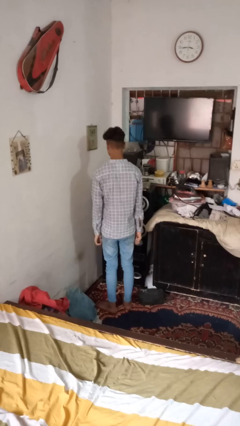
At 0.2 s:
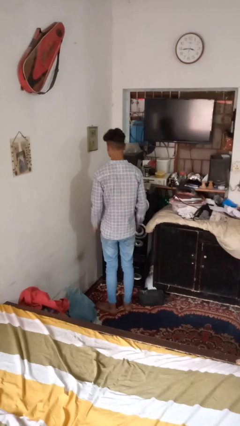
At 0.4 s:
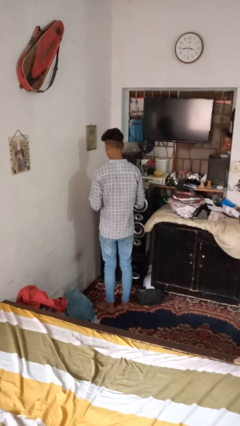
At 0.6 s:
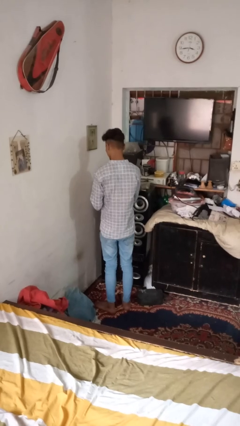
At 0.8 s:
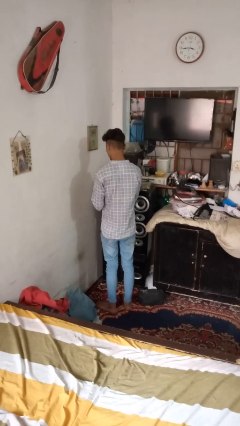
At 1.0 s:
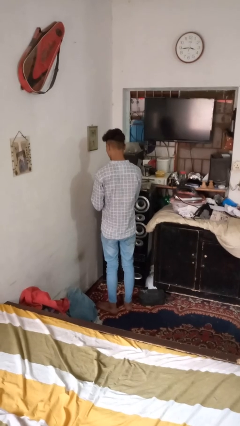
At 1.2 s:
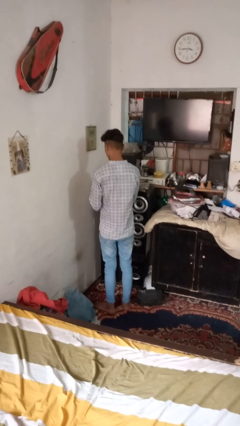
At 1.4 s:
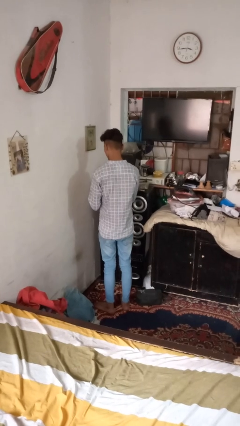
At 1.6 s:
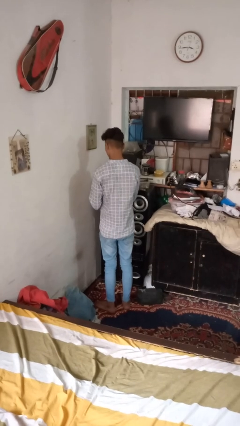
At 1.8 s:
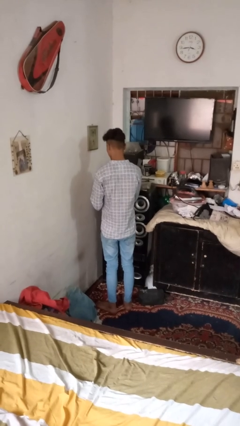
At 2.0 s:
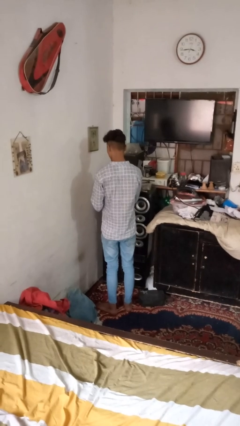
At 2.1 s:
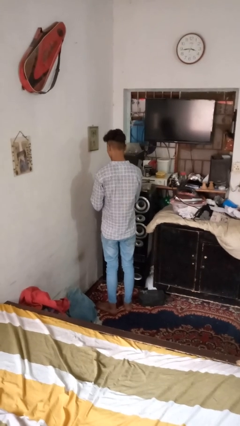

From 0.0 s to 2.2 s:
person clips fingernails

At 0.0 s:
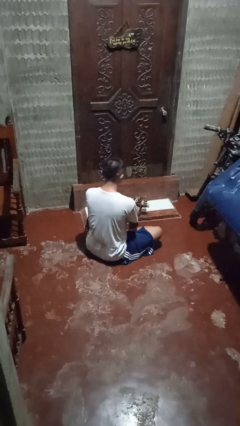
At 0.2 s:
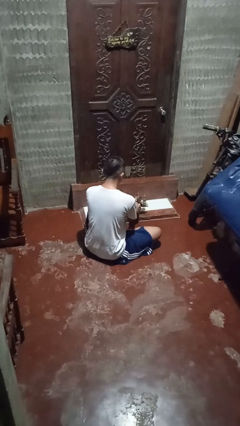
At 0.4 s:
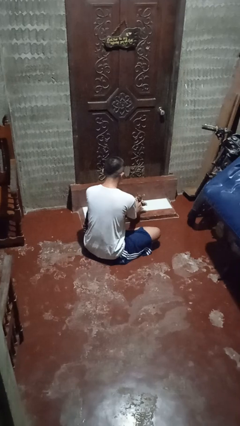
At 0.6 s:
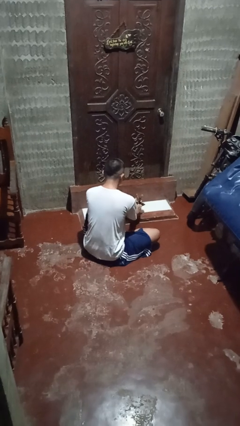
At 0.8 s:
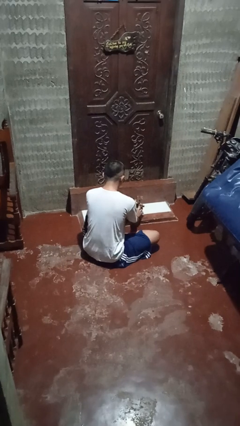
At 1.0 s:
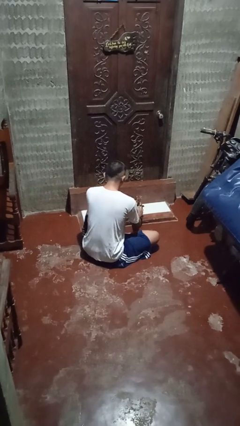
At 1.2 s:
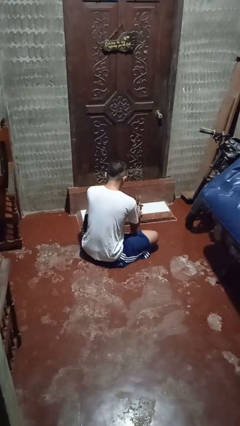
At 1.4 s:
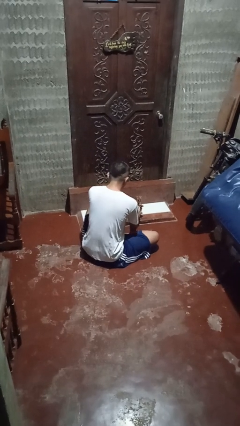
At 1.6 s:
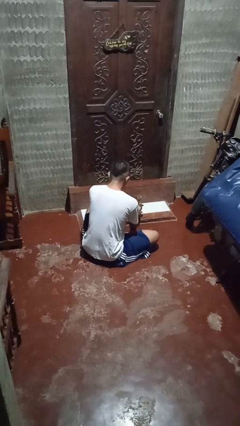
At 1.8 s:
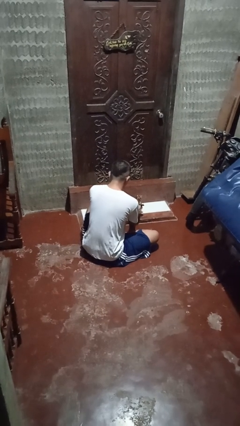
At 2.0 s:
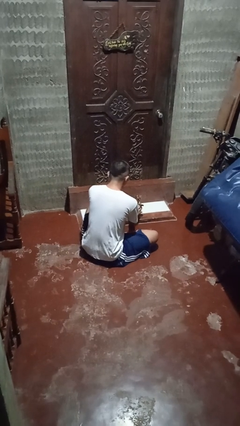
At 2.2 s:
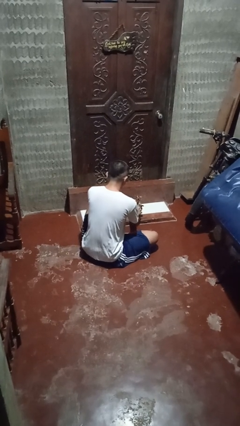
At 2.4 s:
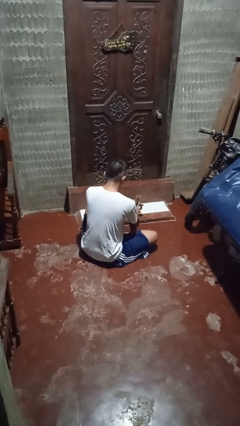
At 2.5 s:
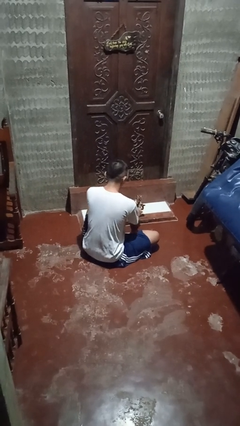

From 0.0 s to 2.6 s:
person arranges flowers in vase

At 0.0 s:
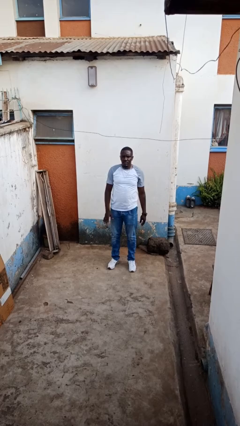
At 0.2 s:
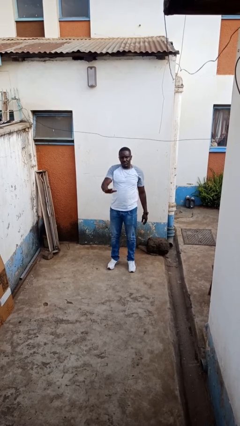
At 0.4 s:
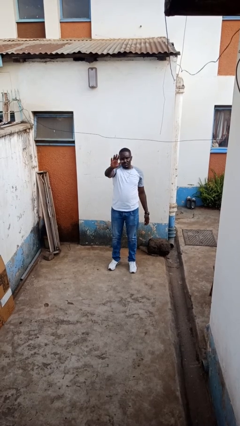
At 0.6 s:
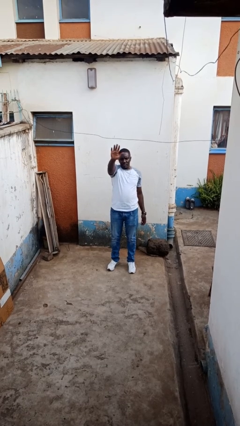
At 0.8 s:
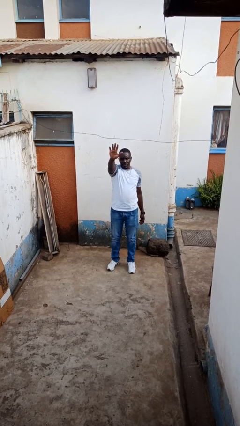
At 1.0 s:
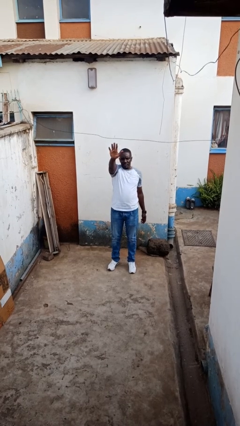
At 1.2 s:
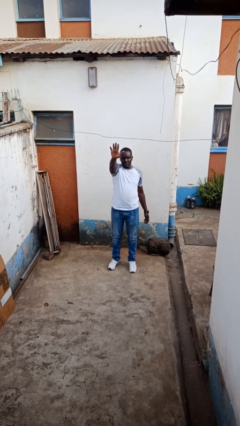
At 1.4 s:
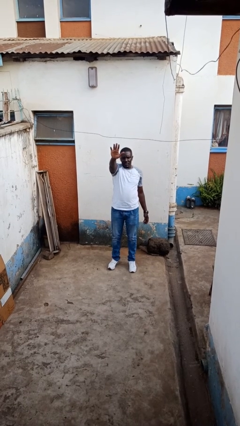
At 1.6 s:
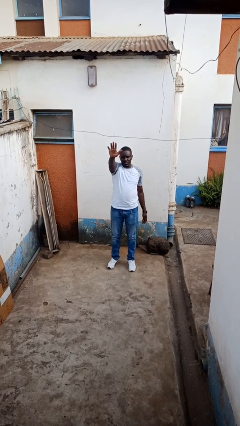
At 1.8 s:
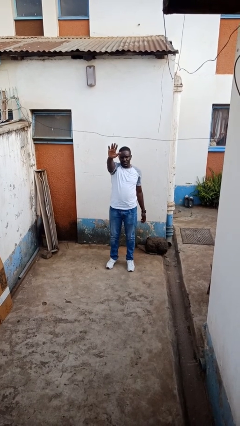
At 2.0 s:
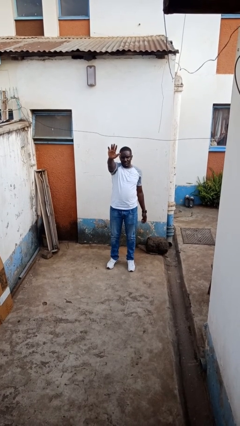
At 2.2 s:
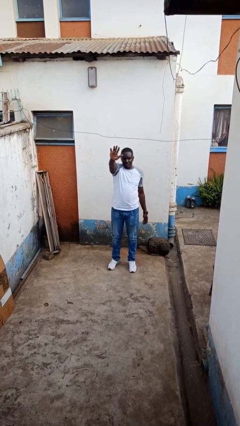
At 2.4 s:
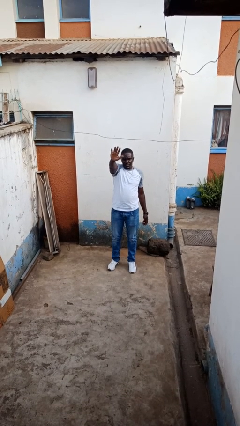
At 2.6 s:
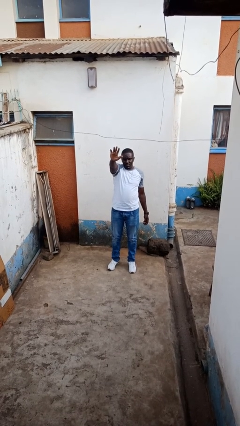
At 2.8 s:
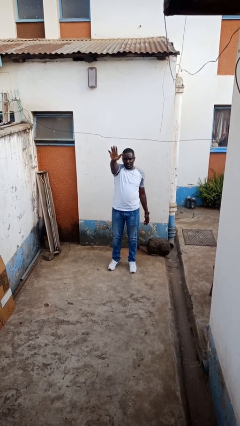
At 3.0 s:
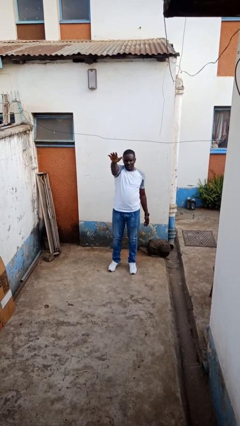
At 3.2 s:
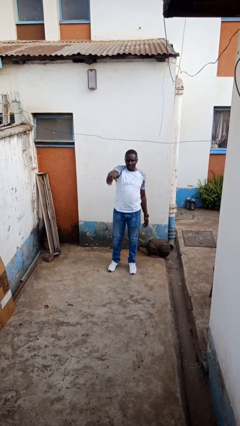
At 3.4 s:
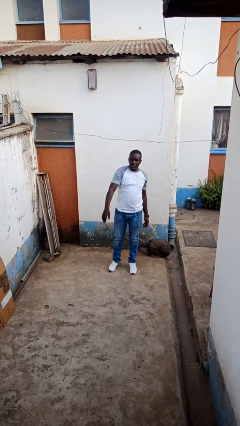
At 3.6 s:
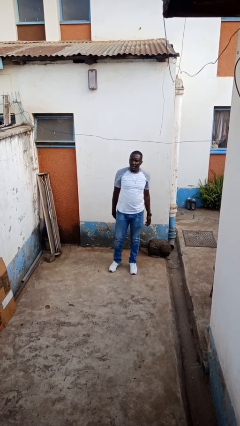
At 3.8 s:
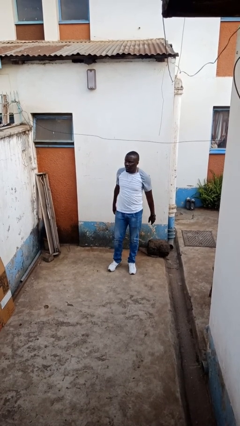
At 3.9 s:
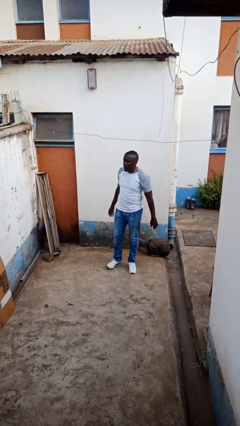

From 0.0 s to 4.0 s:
person waves at person

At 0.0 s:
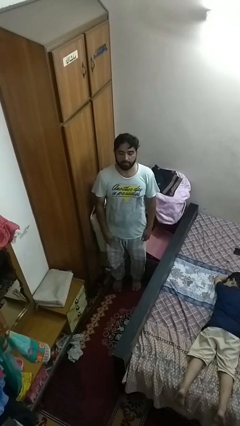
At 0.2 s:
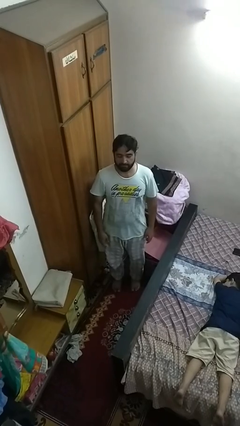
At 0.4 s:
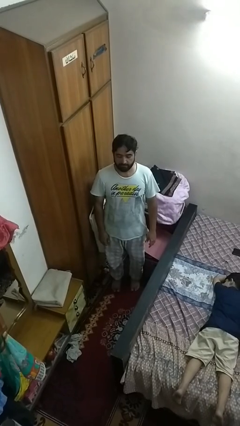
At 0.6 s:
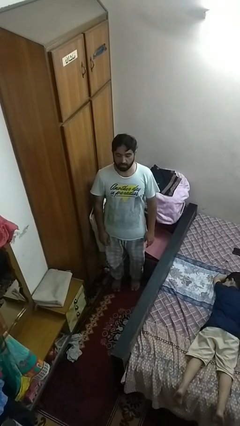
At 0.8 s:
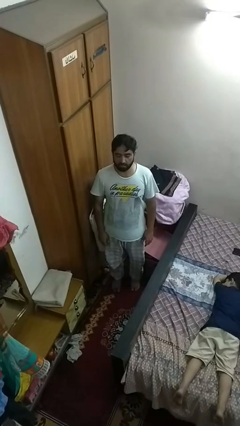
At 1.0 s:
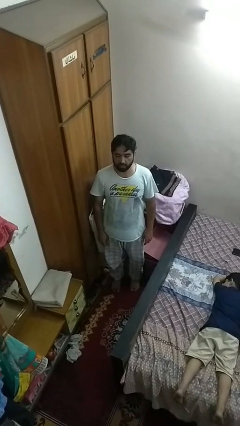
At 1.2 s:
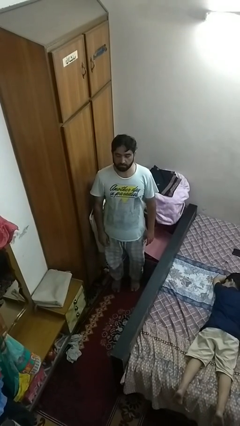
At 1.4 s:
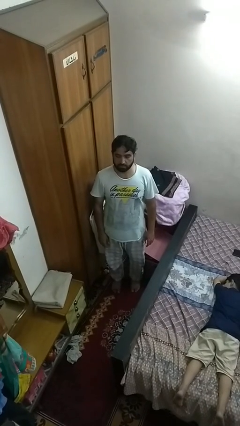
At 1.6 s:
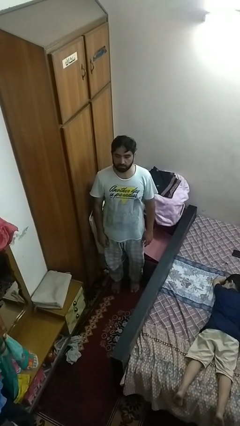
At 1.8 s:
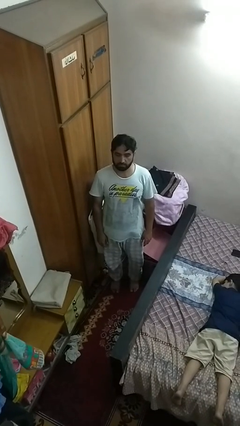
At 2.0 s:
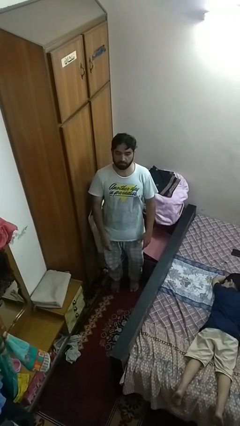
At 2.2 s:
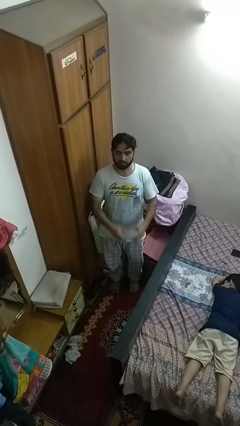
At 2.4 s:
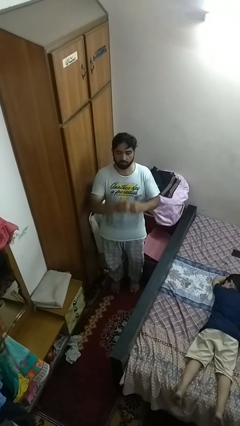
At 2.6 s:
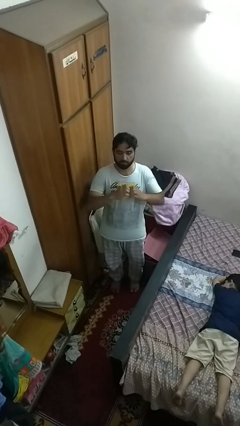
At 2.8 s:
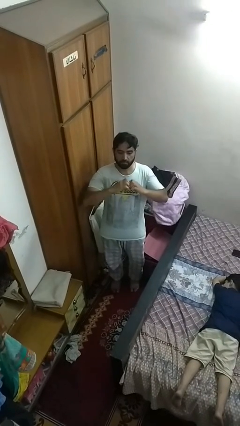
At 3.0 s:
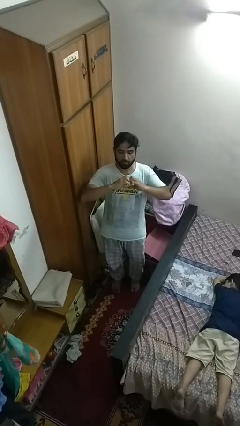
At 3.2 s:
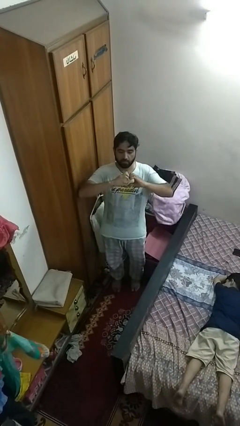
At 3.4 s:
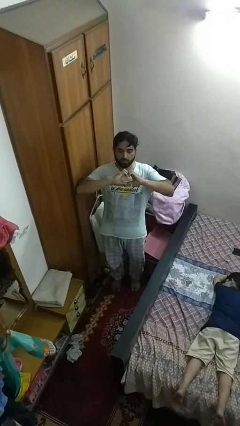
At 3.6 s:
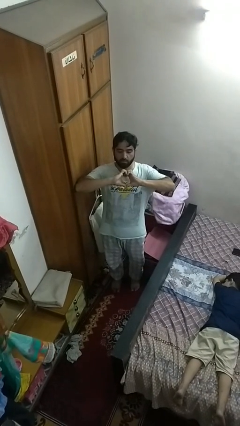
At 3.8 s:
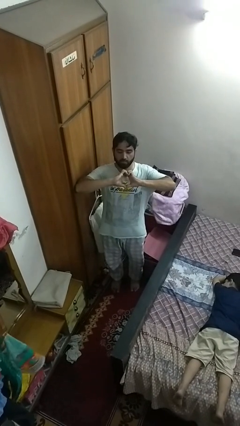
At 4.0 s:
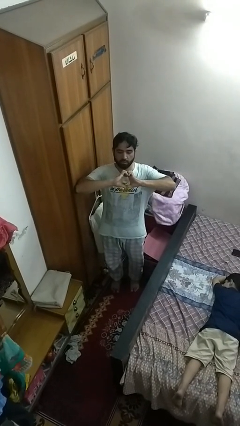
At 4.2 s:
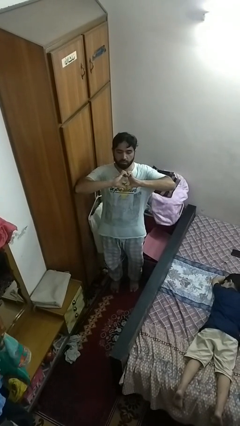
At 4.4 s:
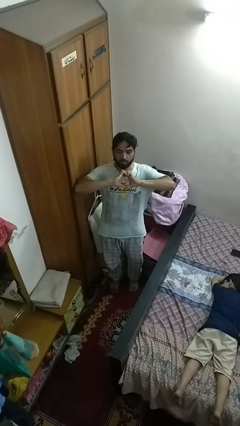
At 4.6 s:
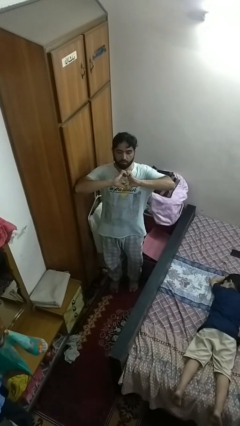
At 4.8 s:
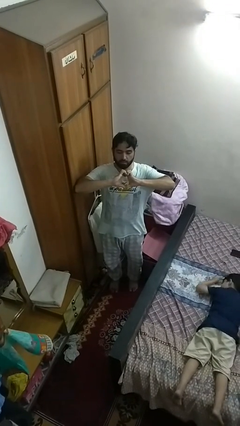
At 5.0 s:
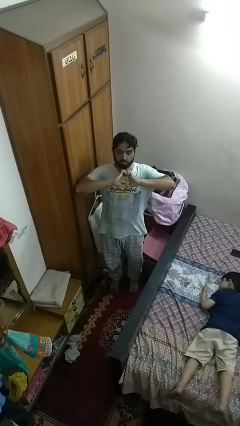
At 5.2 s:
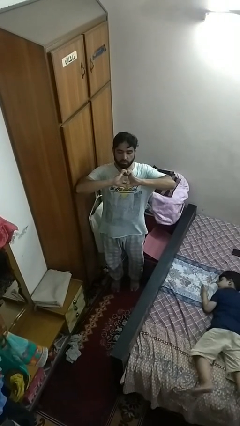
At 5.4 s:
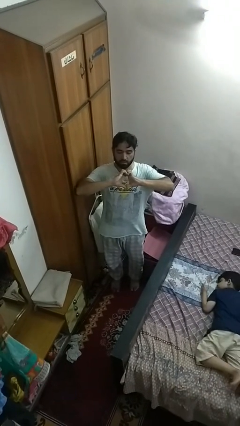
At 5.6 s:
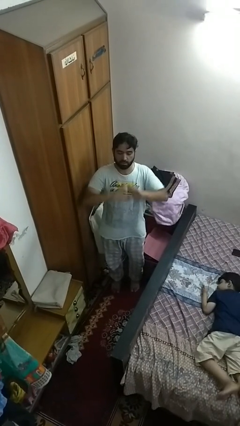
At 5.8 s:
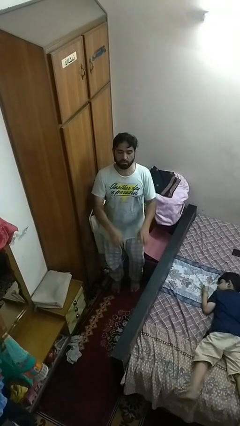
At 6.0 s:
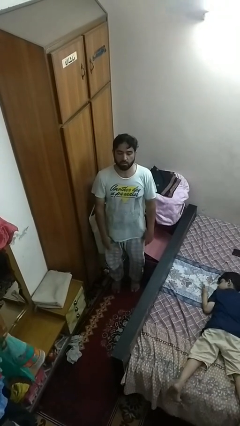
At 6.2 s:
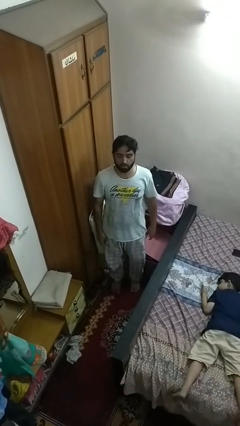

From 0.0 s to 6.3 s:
person gestures heart

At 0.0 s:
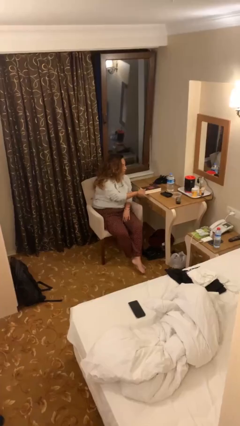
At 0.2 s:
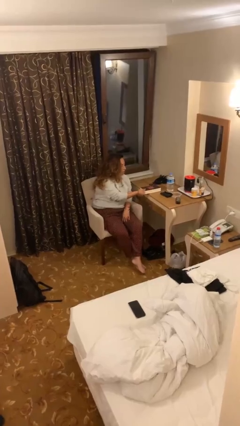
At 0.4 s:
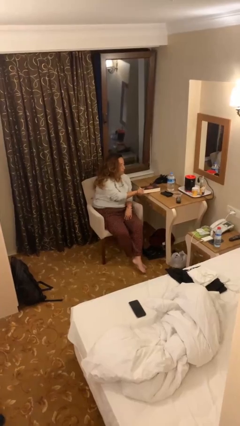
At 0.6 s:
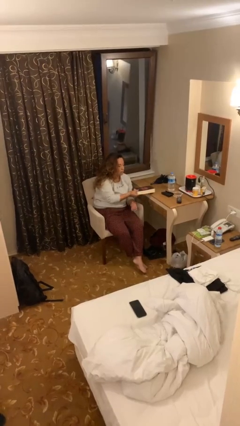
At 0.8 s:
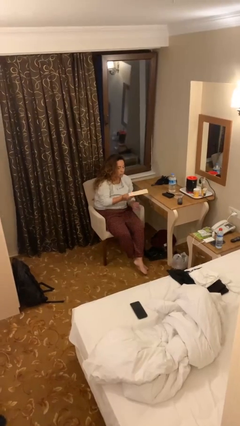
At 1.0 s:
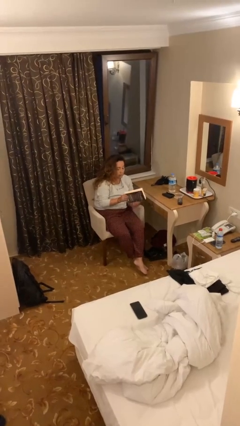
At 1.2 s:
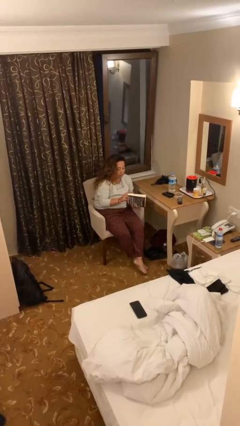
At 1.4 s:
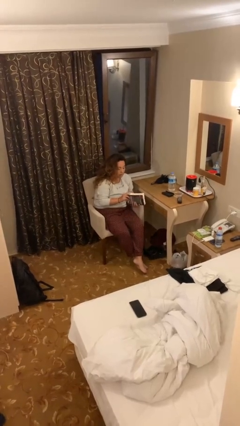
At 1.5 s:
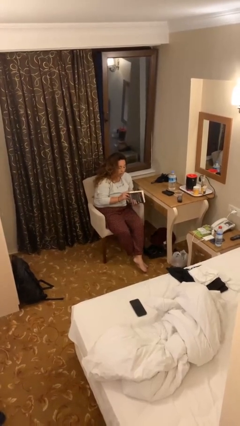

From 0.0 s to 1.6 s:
person picks up object from table

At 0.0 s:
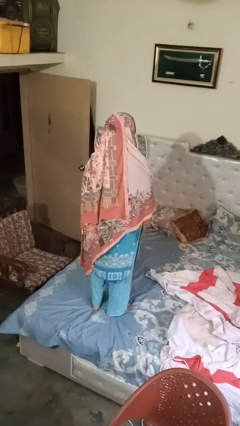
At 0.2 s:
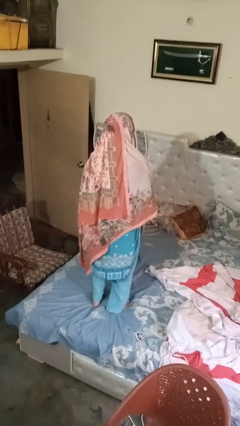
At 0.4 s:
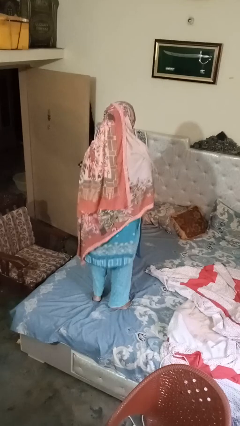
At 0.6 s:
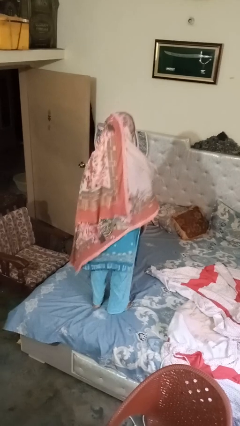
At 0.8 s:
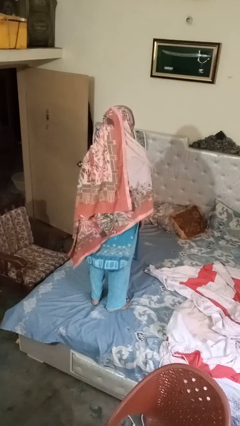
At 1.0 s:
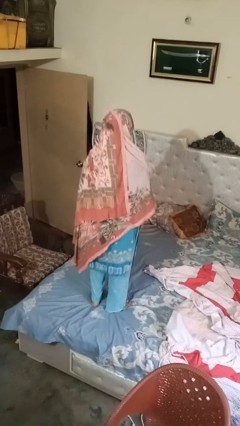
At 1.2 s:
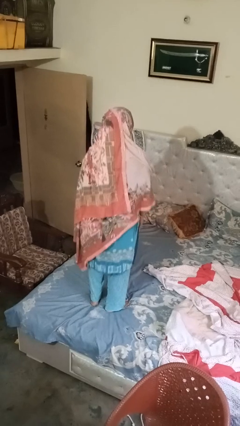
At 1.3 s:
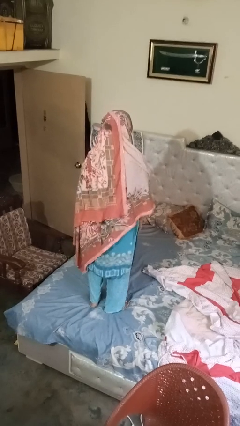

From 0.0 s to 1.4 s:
person jumps on bed
